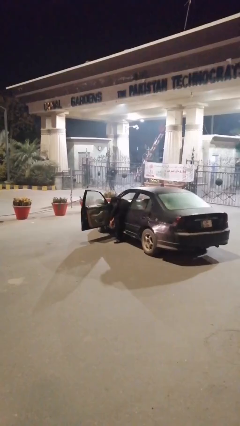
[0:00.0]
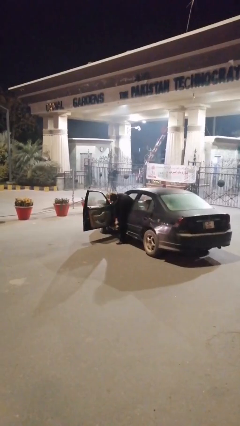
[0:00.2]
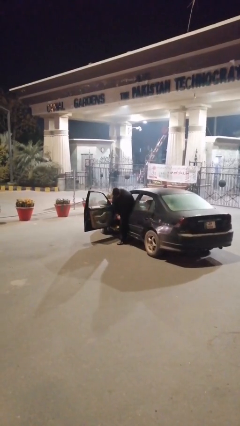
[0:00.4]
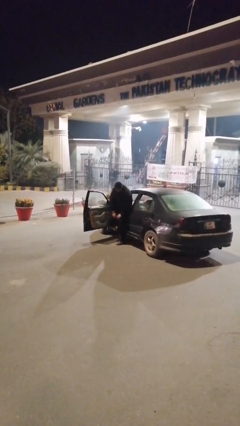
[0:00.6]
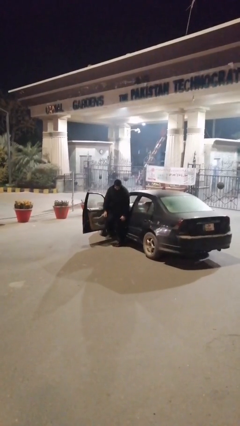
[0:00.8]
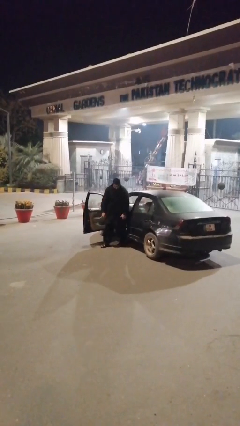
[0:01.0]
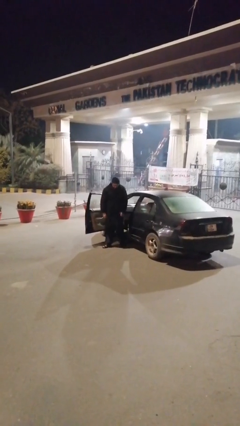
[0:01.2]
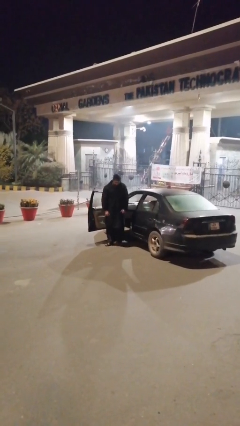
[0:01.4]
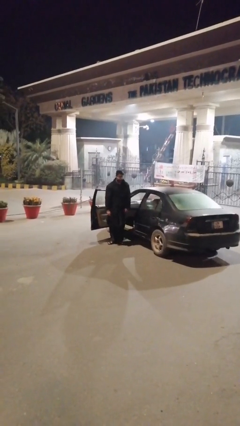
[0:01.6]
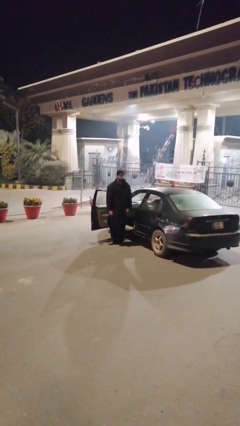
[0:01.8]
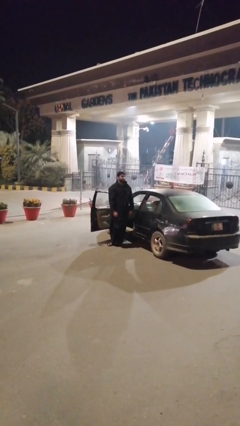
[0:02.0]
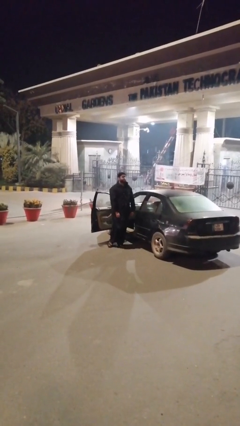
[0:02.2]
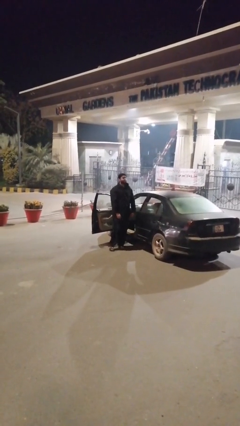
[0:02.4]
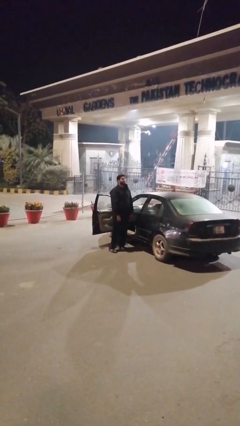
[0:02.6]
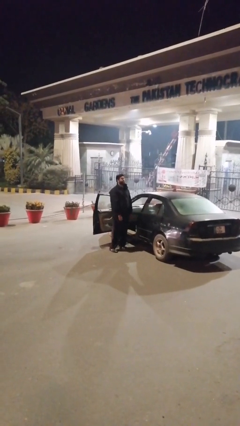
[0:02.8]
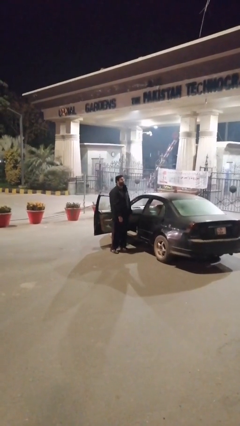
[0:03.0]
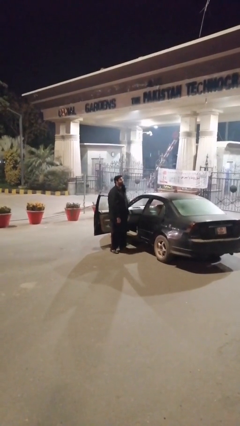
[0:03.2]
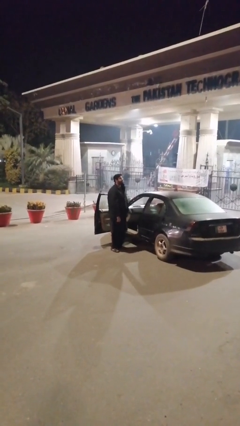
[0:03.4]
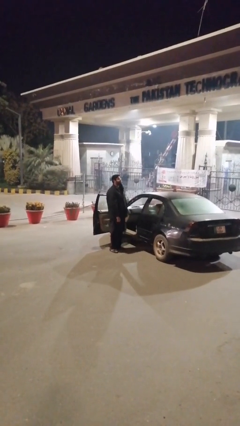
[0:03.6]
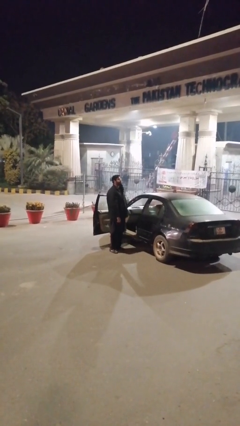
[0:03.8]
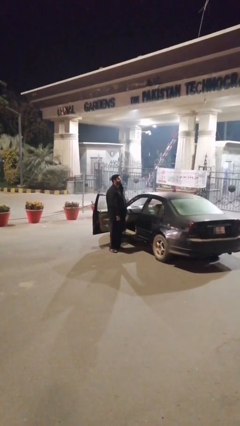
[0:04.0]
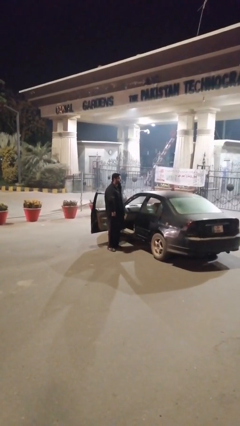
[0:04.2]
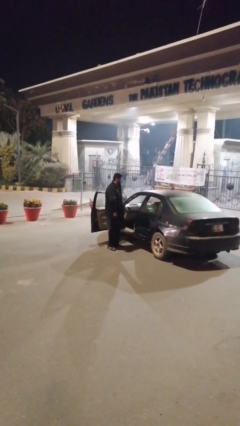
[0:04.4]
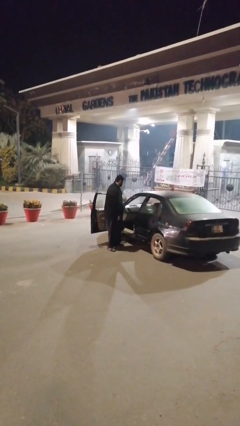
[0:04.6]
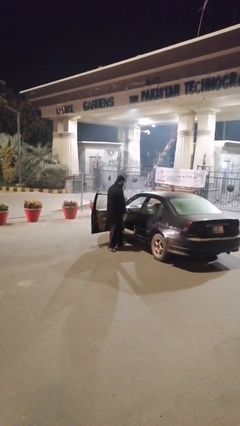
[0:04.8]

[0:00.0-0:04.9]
person exits car

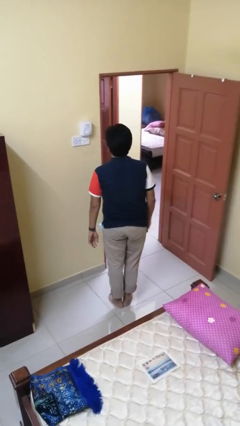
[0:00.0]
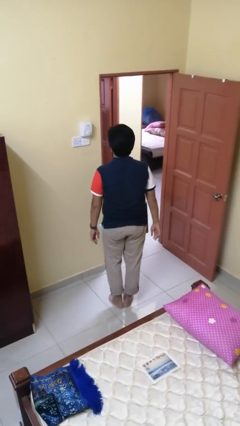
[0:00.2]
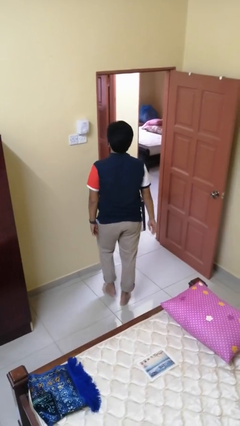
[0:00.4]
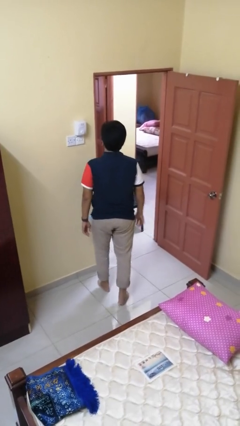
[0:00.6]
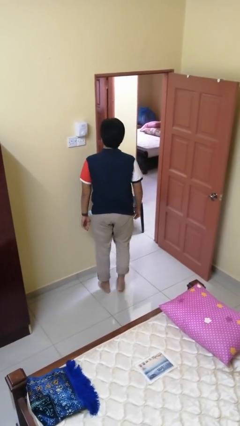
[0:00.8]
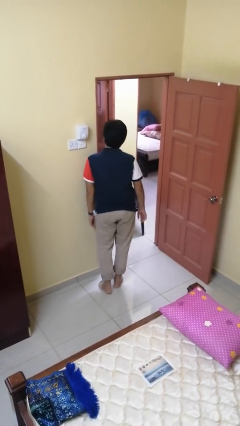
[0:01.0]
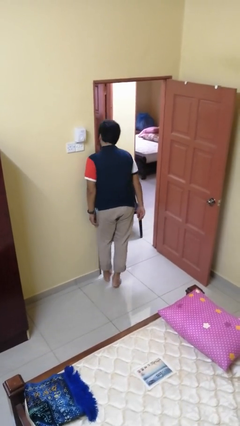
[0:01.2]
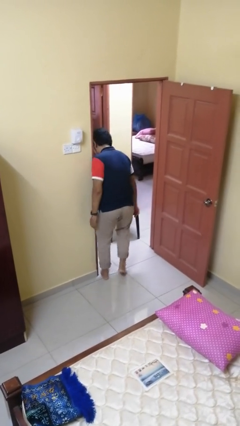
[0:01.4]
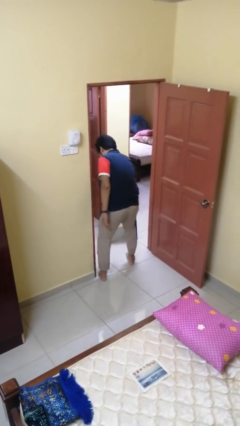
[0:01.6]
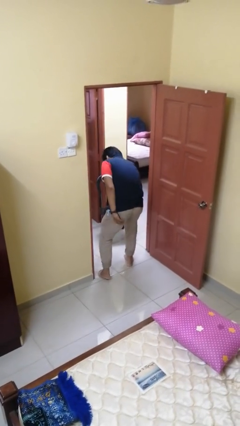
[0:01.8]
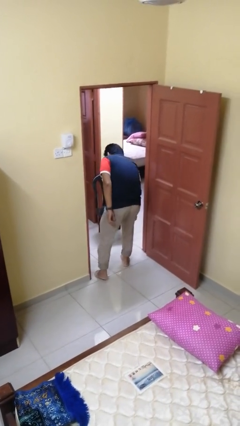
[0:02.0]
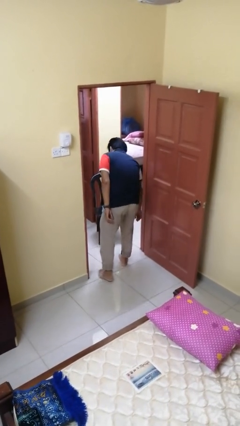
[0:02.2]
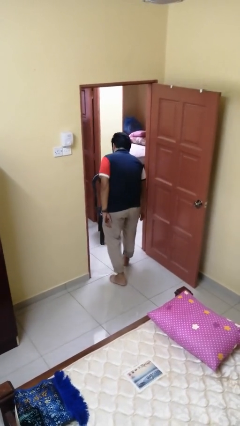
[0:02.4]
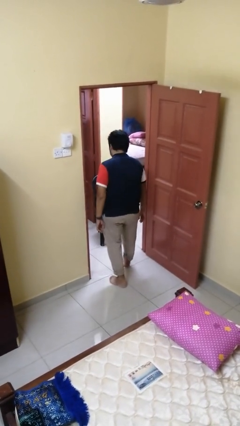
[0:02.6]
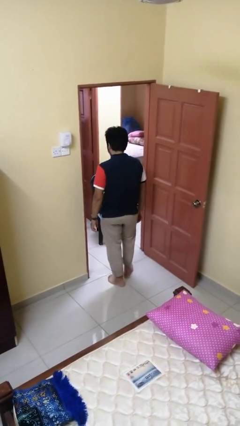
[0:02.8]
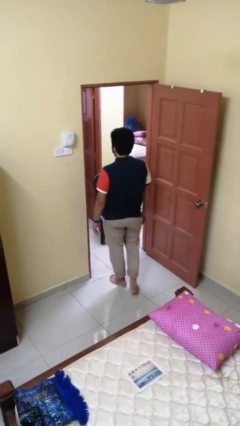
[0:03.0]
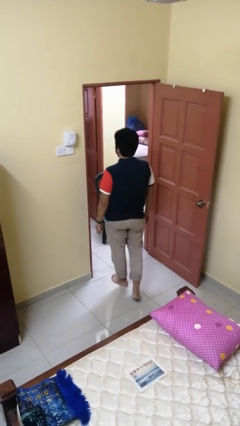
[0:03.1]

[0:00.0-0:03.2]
person bumps into wall

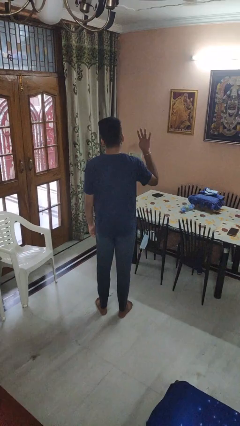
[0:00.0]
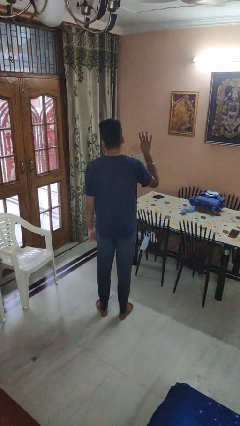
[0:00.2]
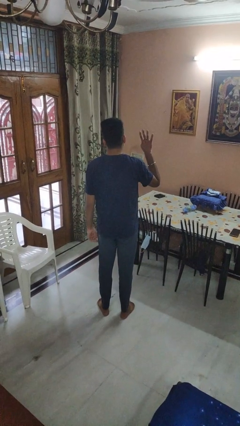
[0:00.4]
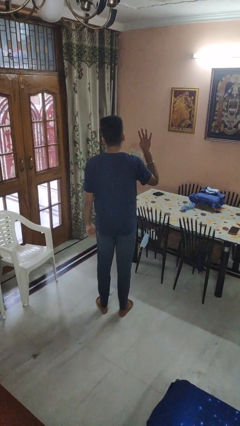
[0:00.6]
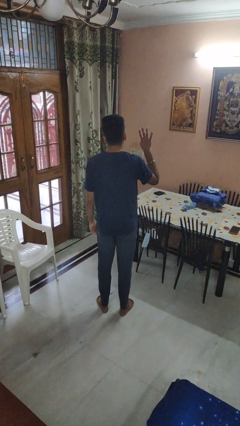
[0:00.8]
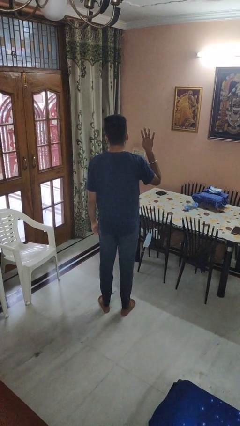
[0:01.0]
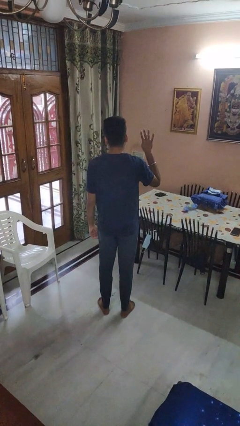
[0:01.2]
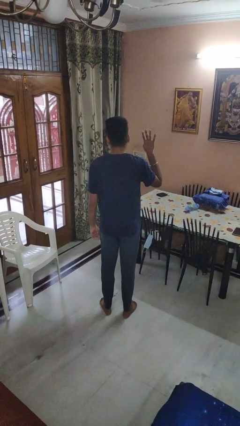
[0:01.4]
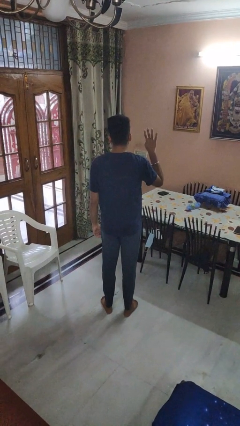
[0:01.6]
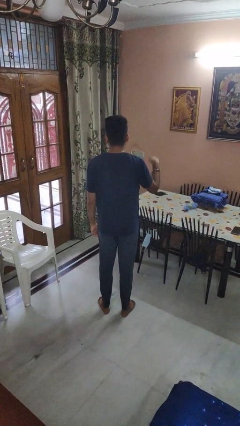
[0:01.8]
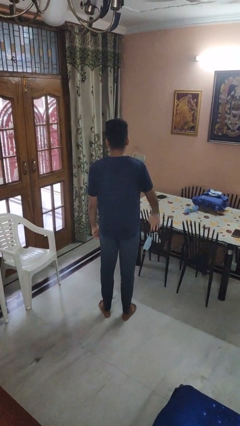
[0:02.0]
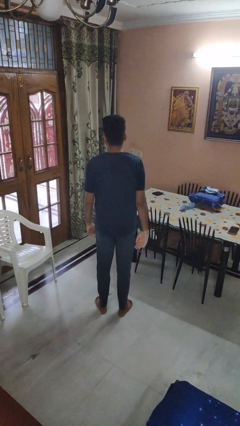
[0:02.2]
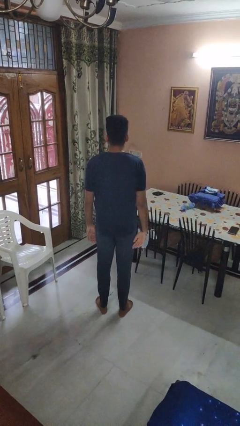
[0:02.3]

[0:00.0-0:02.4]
person gestures number four

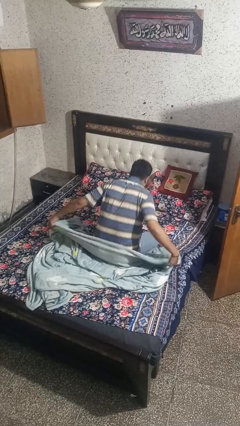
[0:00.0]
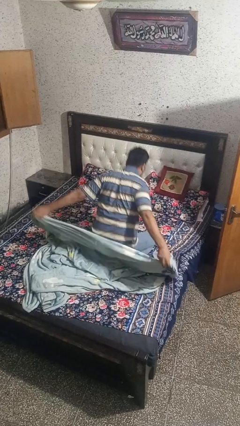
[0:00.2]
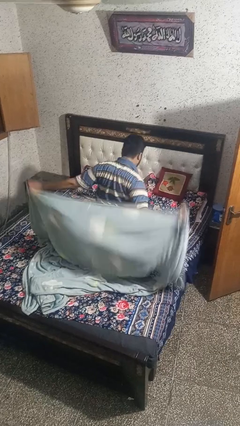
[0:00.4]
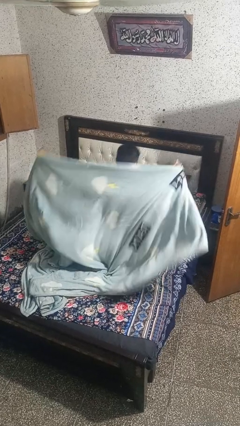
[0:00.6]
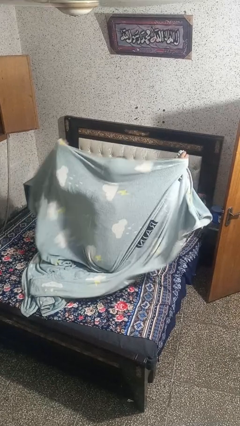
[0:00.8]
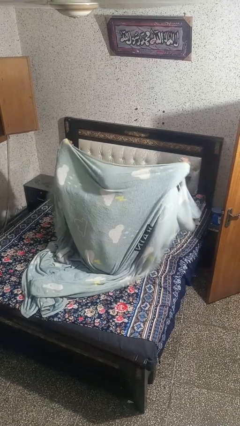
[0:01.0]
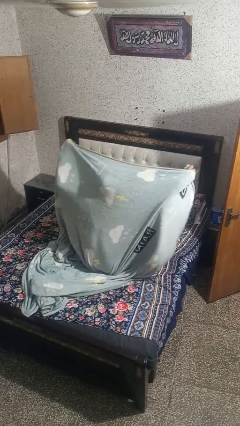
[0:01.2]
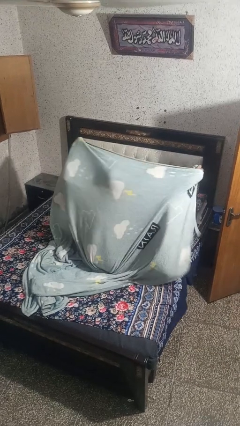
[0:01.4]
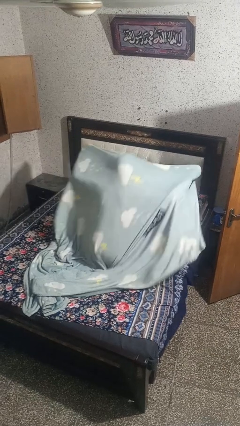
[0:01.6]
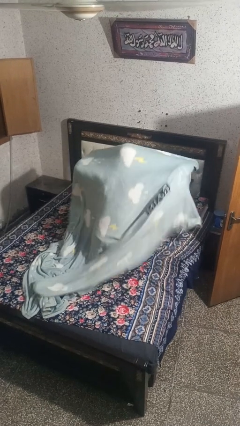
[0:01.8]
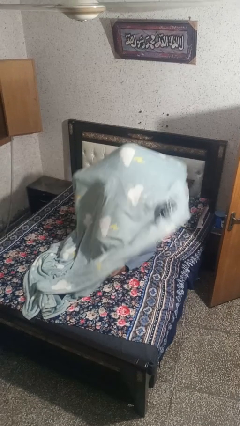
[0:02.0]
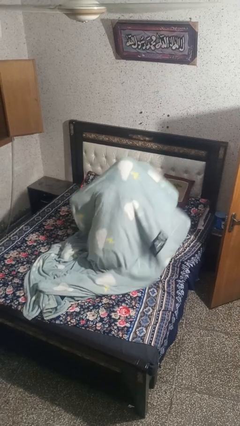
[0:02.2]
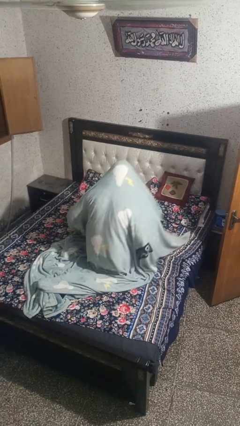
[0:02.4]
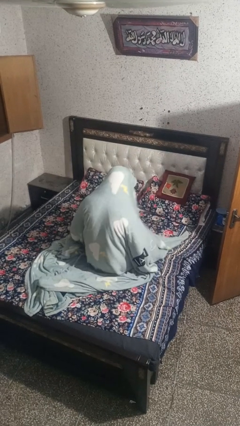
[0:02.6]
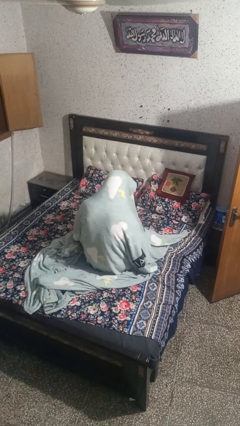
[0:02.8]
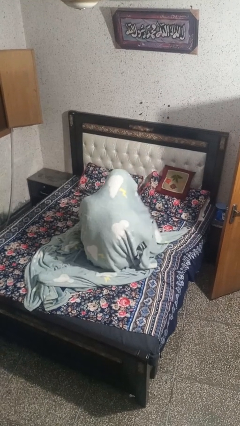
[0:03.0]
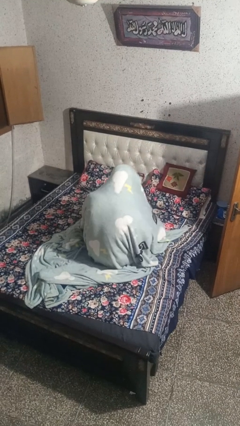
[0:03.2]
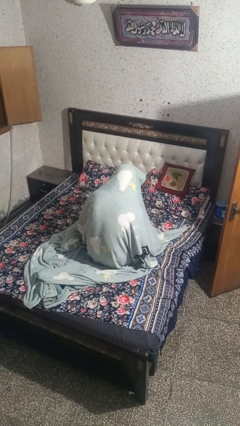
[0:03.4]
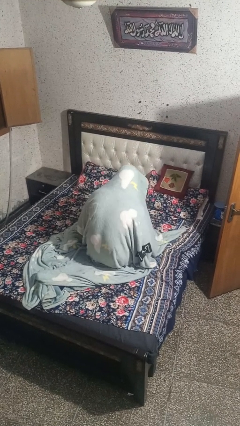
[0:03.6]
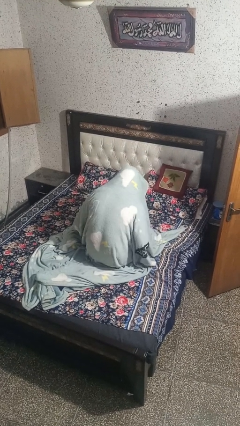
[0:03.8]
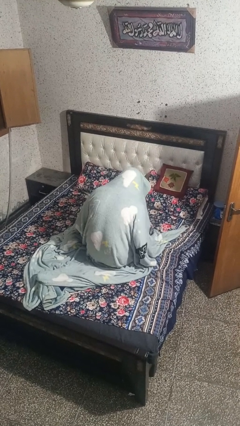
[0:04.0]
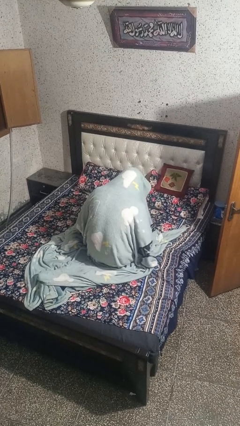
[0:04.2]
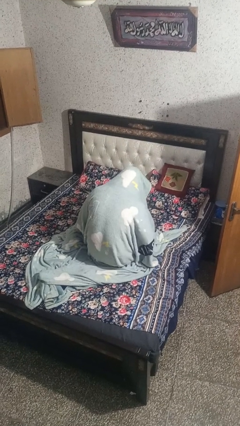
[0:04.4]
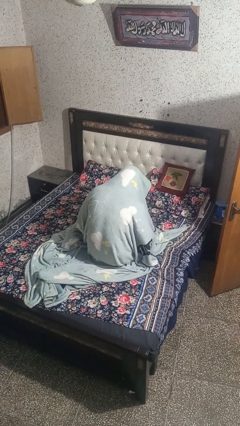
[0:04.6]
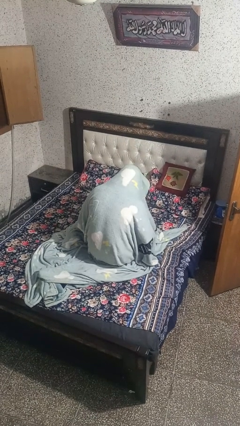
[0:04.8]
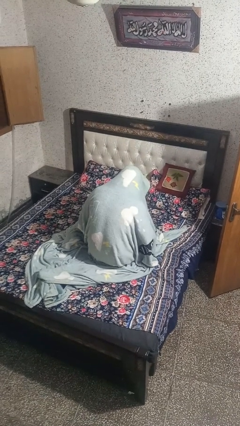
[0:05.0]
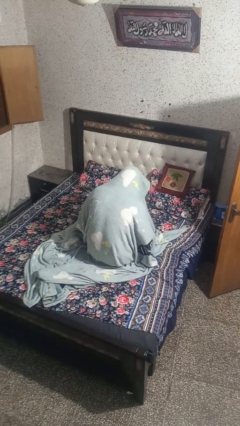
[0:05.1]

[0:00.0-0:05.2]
person covers with blanket

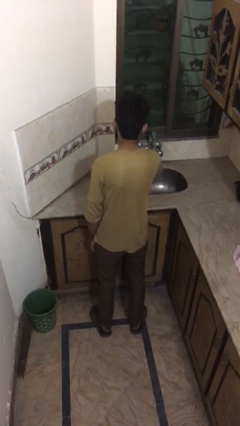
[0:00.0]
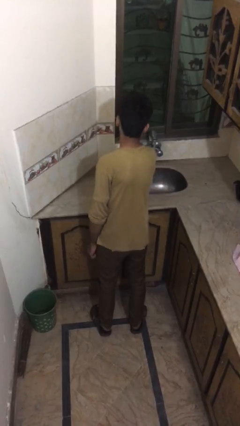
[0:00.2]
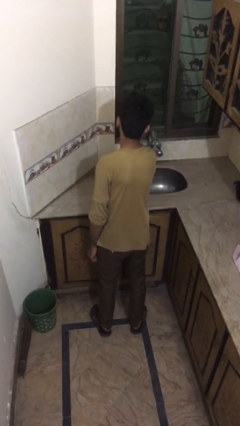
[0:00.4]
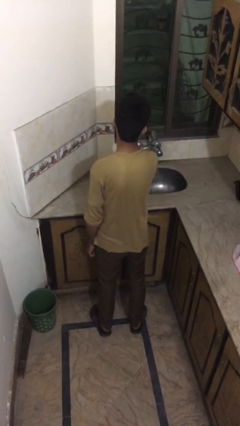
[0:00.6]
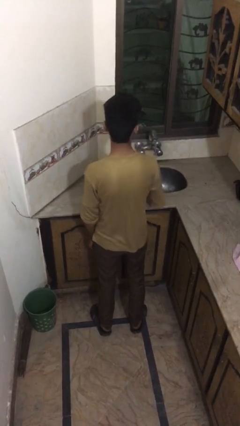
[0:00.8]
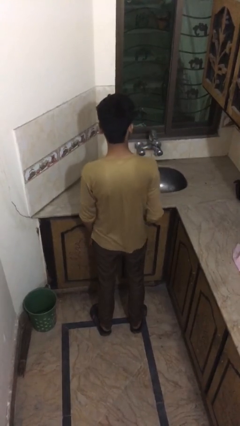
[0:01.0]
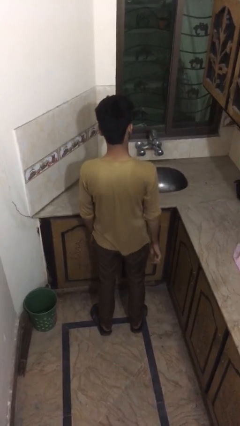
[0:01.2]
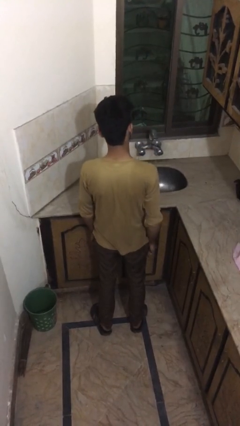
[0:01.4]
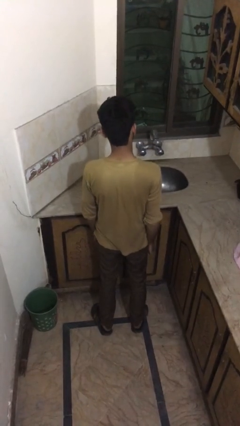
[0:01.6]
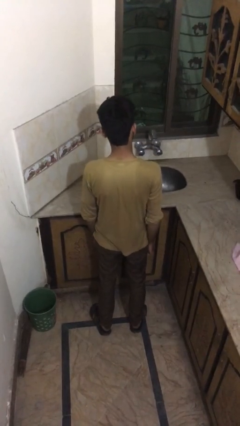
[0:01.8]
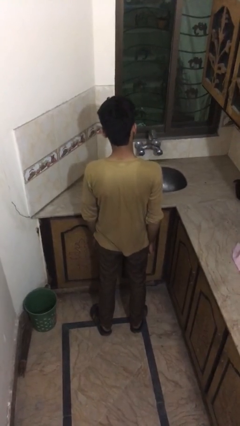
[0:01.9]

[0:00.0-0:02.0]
person turns off faucet
